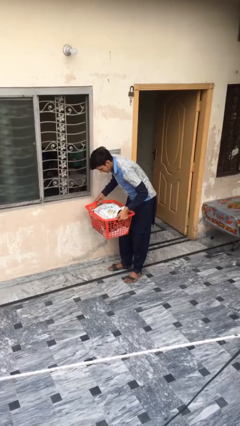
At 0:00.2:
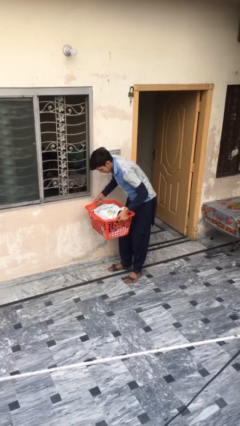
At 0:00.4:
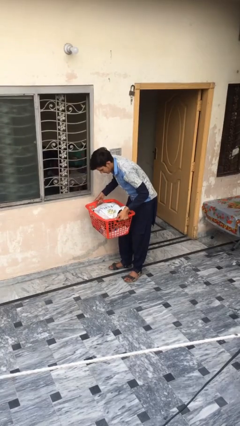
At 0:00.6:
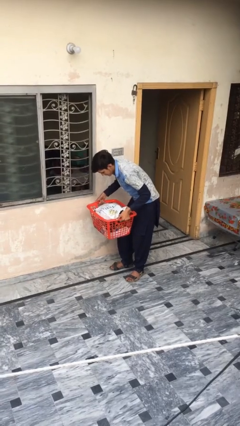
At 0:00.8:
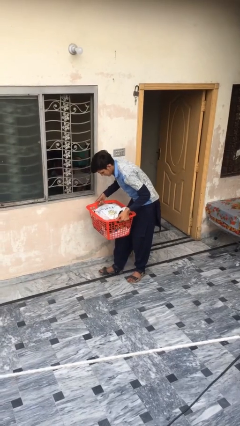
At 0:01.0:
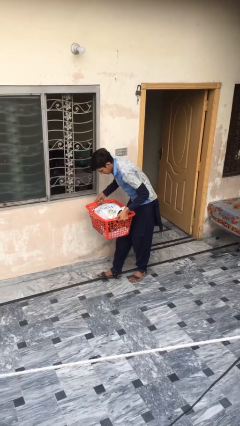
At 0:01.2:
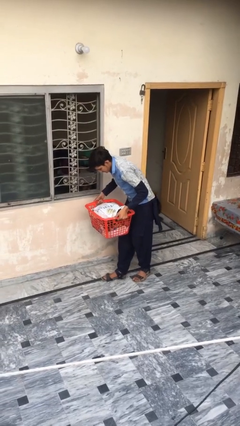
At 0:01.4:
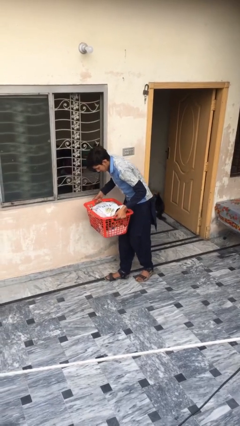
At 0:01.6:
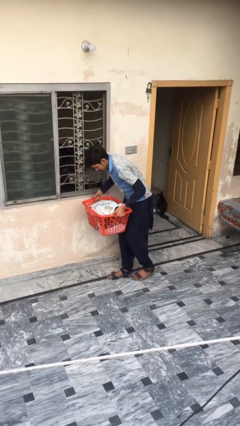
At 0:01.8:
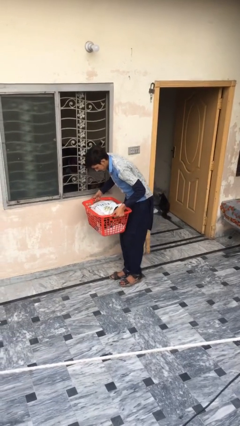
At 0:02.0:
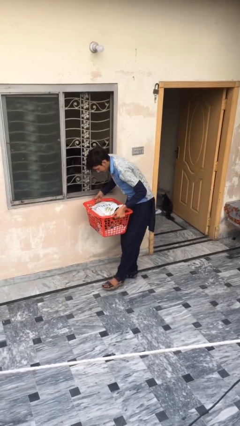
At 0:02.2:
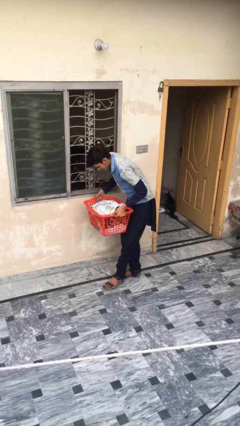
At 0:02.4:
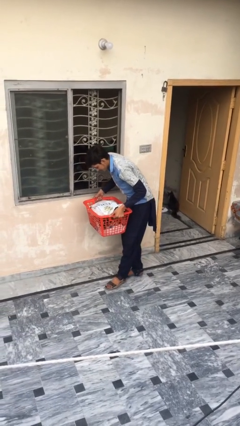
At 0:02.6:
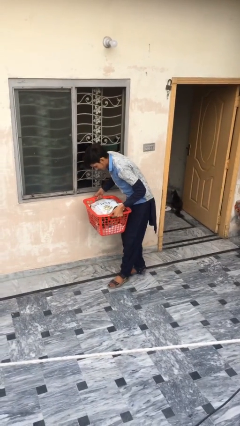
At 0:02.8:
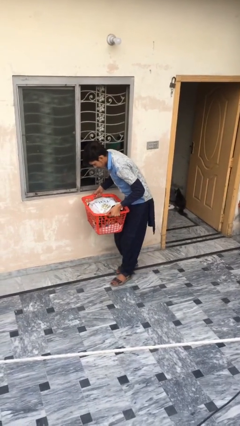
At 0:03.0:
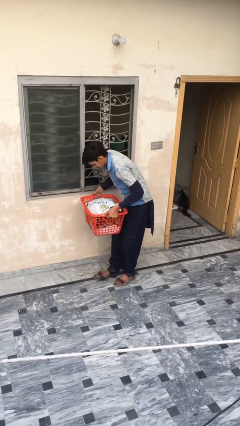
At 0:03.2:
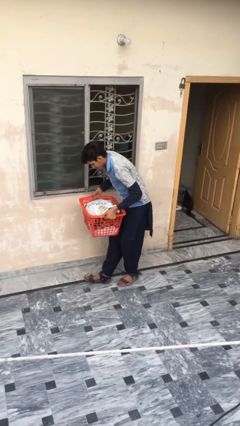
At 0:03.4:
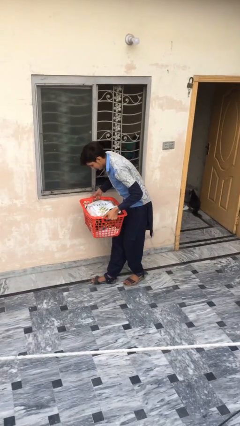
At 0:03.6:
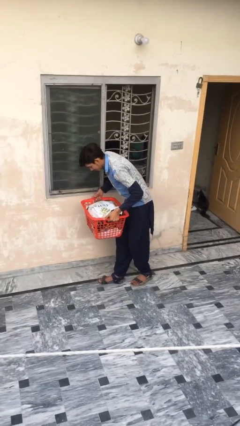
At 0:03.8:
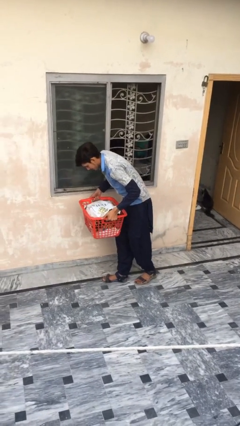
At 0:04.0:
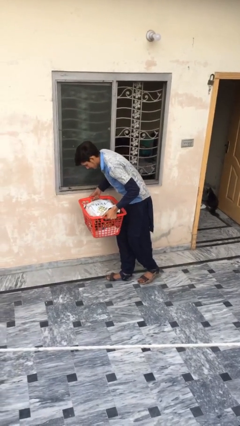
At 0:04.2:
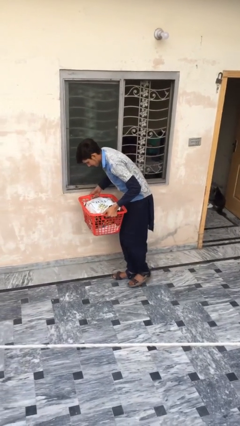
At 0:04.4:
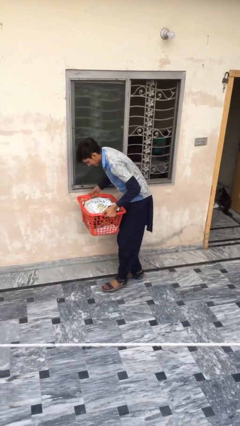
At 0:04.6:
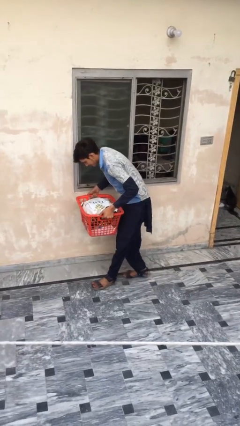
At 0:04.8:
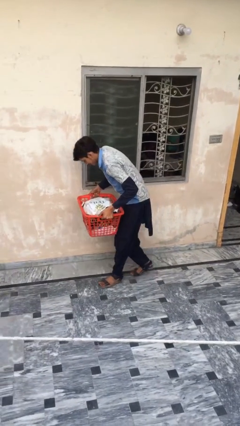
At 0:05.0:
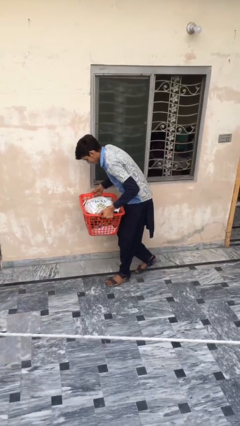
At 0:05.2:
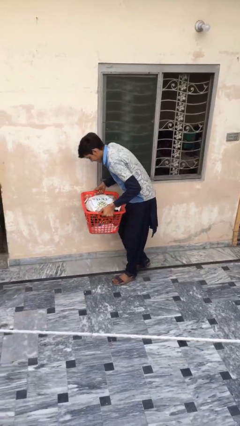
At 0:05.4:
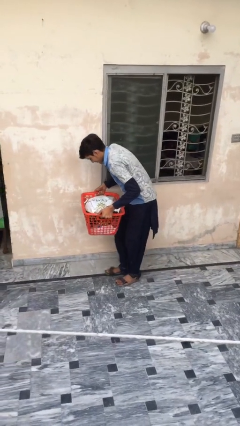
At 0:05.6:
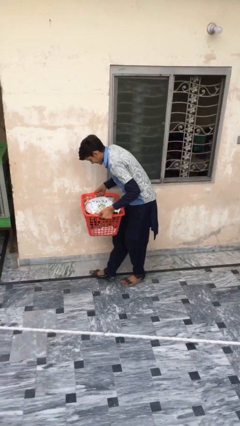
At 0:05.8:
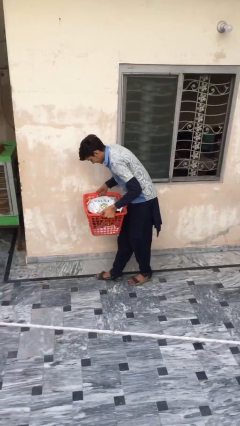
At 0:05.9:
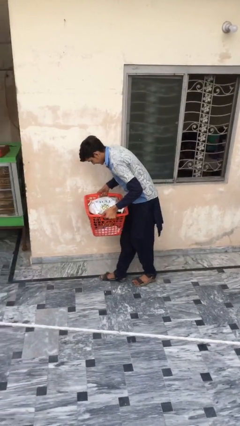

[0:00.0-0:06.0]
person carries heavy object

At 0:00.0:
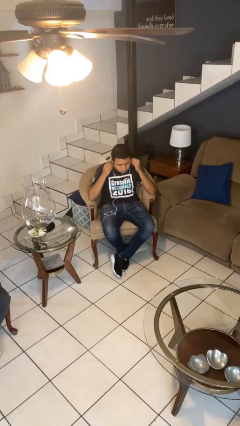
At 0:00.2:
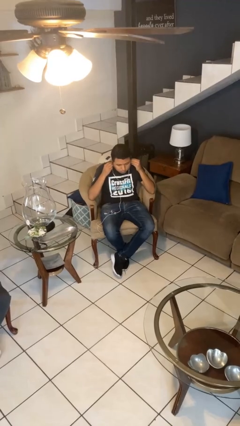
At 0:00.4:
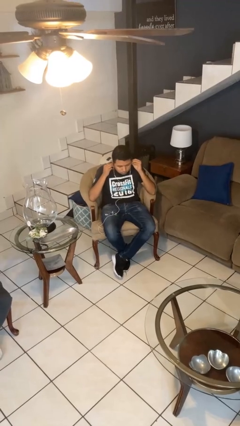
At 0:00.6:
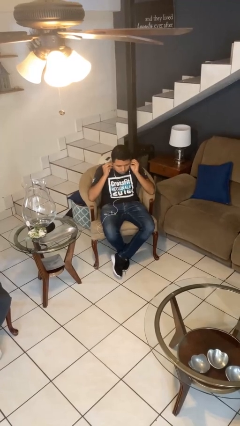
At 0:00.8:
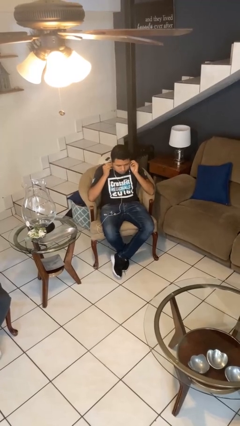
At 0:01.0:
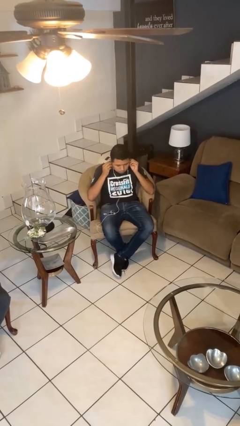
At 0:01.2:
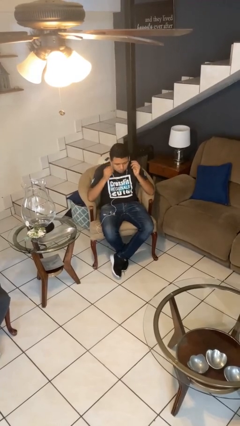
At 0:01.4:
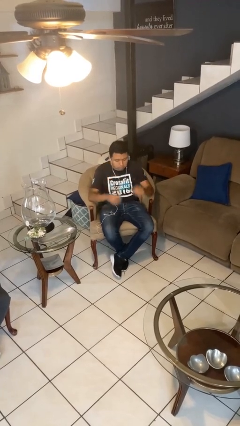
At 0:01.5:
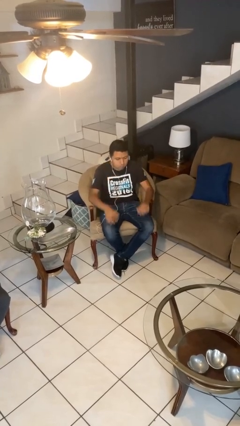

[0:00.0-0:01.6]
person puts on headphones

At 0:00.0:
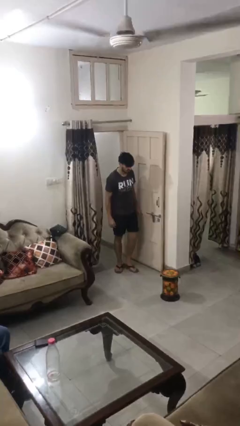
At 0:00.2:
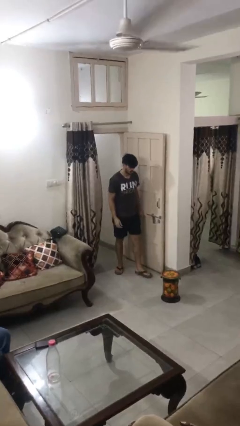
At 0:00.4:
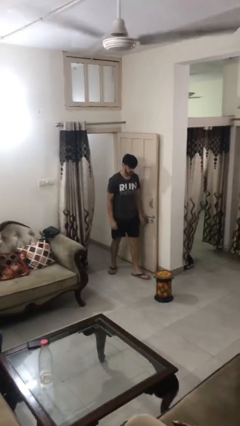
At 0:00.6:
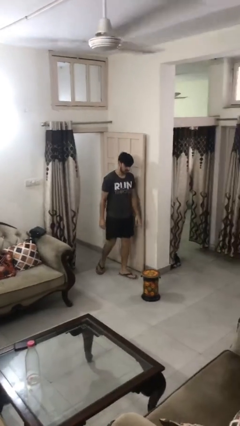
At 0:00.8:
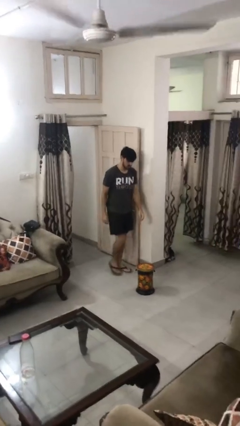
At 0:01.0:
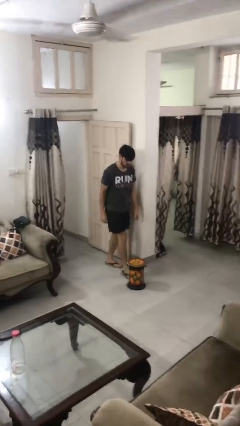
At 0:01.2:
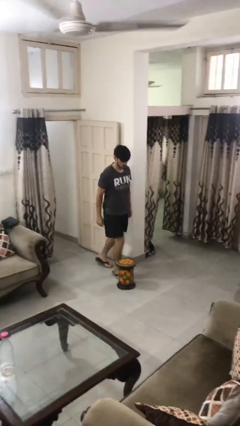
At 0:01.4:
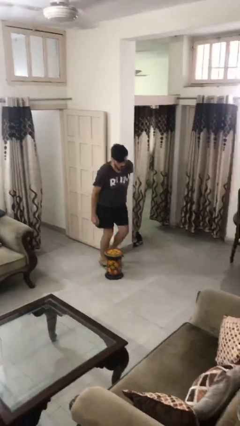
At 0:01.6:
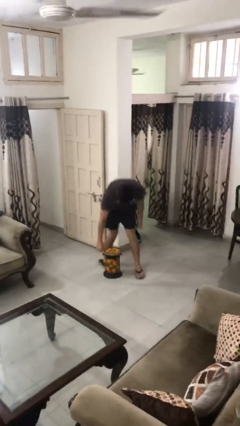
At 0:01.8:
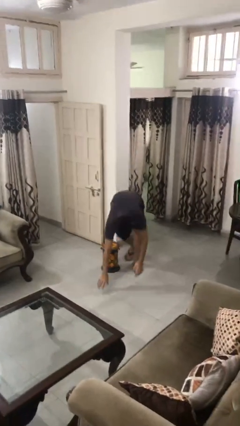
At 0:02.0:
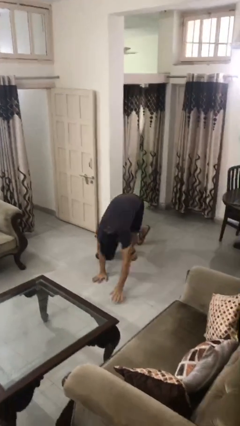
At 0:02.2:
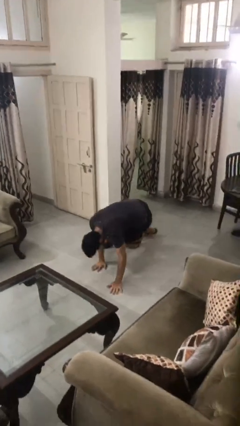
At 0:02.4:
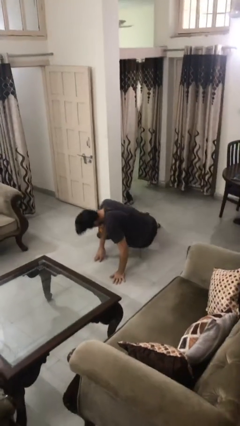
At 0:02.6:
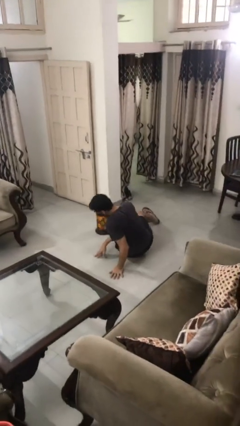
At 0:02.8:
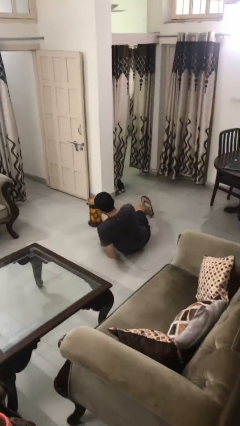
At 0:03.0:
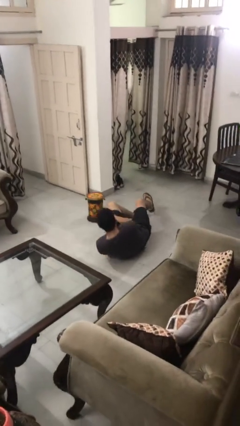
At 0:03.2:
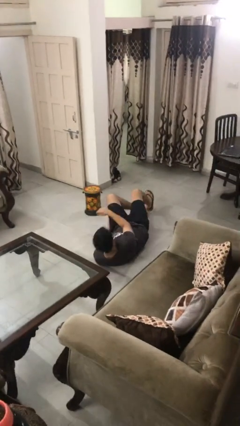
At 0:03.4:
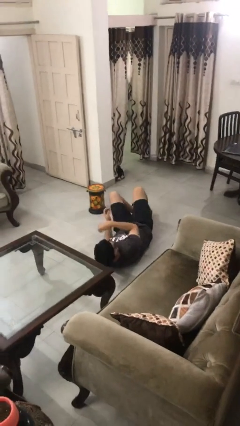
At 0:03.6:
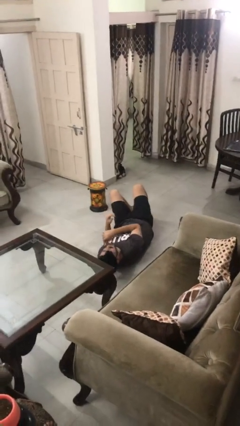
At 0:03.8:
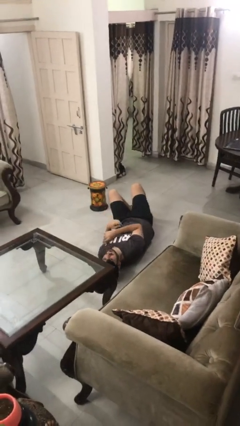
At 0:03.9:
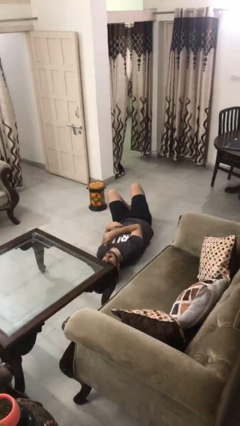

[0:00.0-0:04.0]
person trips on object on floor

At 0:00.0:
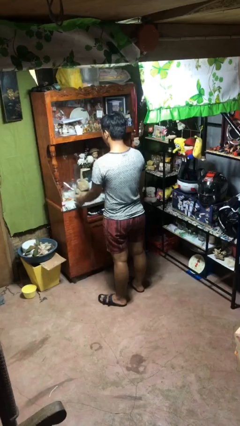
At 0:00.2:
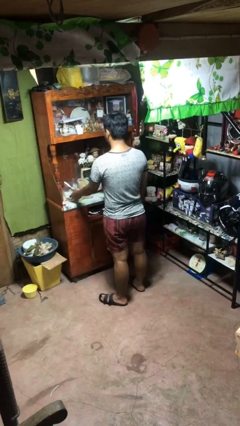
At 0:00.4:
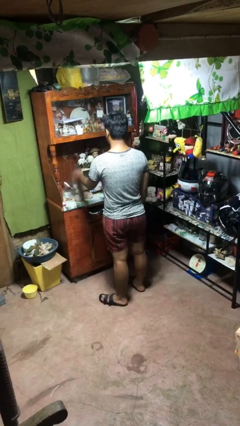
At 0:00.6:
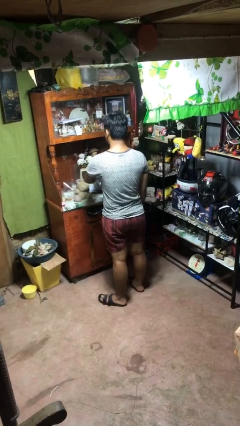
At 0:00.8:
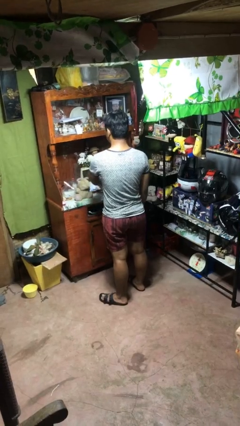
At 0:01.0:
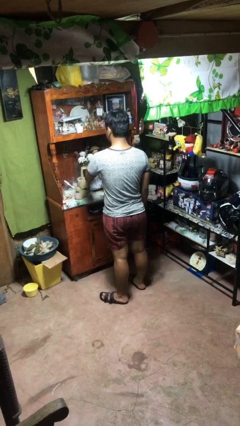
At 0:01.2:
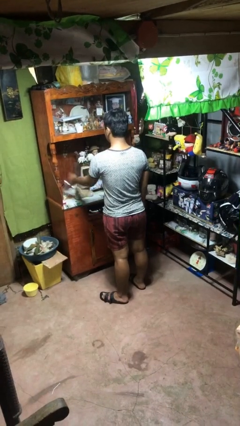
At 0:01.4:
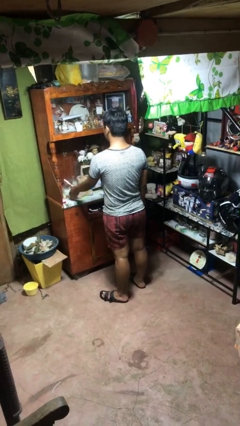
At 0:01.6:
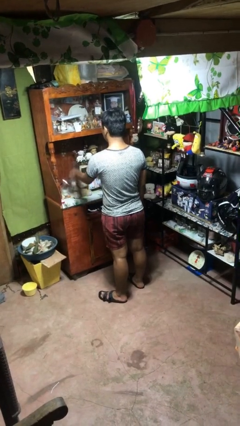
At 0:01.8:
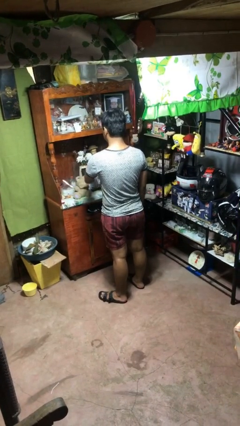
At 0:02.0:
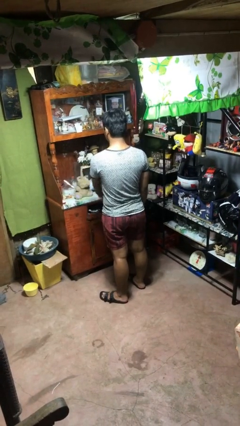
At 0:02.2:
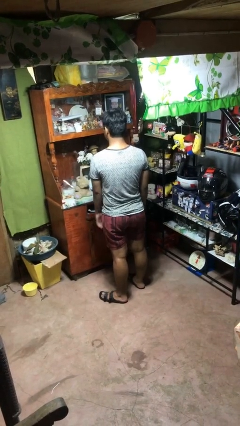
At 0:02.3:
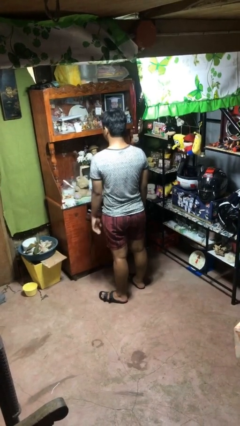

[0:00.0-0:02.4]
person waves hand over object

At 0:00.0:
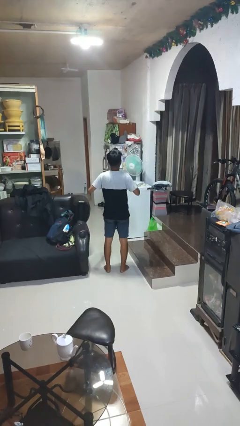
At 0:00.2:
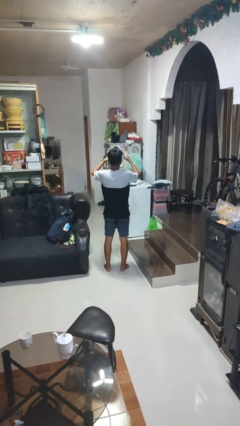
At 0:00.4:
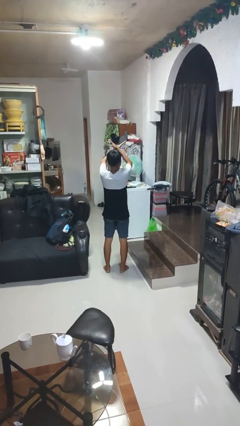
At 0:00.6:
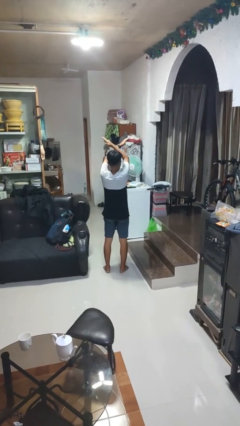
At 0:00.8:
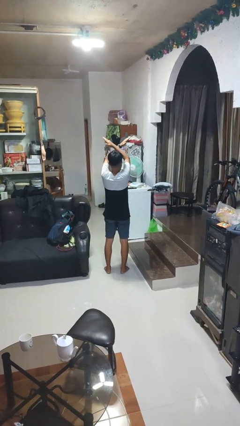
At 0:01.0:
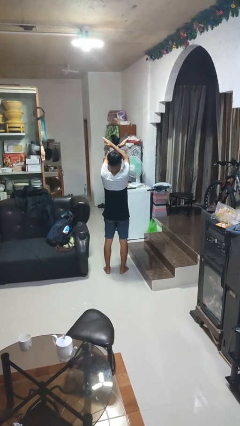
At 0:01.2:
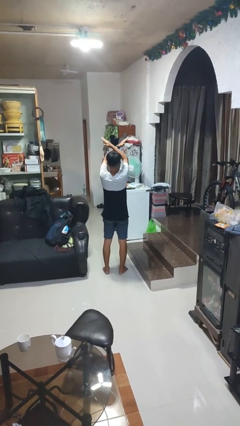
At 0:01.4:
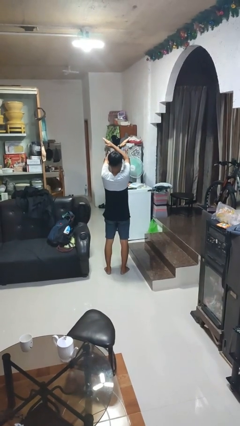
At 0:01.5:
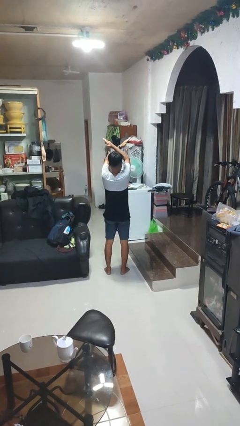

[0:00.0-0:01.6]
person gestures arms x

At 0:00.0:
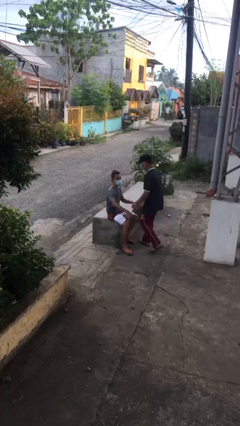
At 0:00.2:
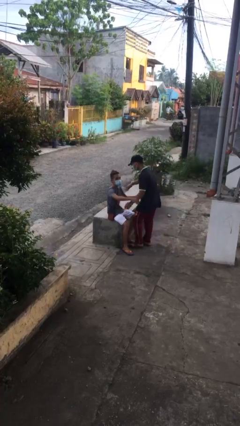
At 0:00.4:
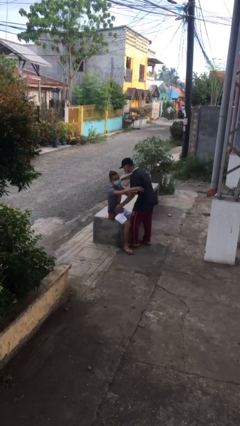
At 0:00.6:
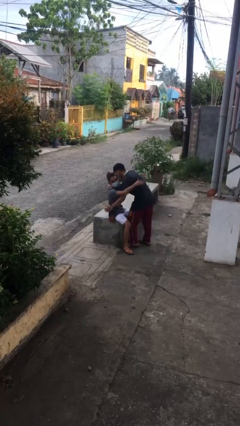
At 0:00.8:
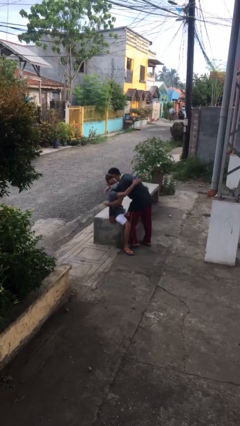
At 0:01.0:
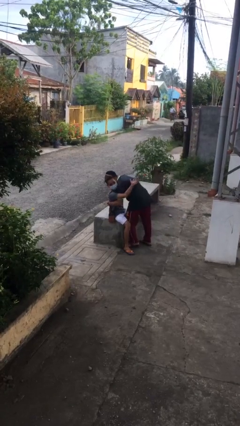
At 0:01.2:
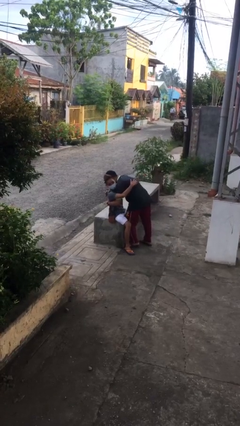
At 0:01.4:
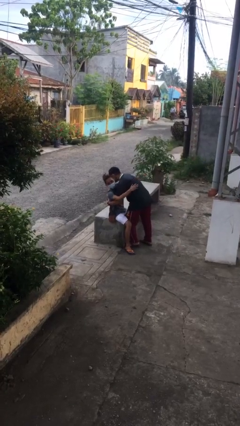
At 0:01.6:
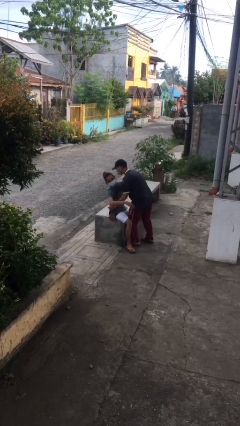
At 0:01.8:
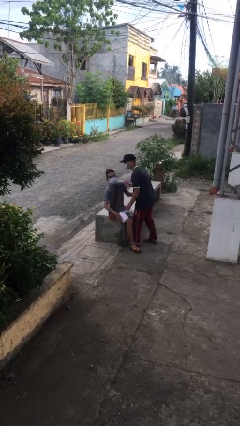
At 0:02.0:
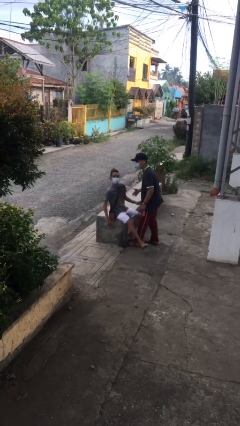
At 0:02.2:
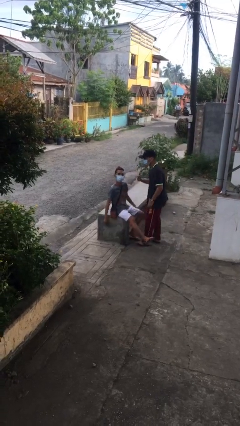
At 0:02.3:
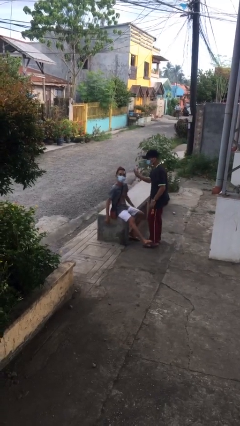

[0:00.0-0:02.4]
person embraces person
